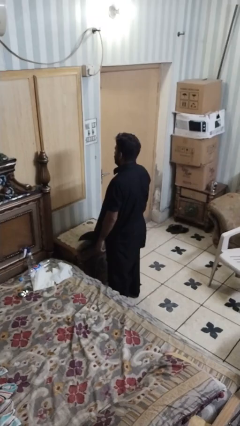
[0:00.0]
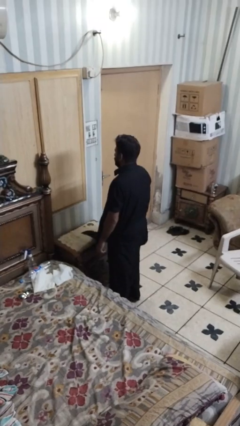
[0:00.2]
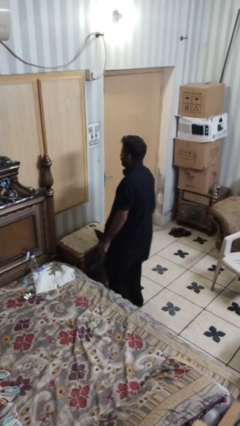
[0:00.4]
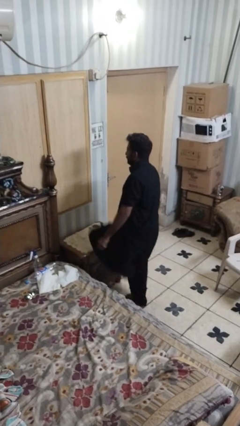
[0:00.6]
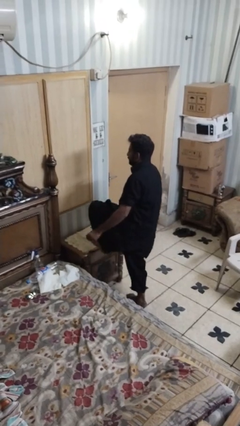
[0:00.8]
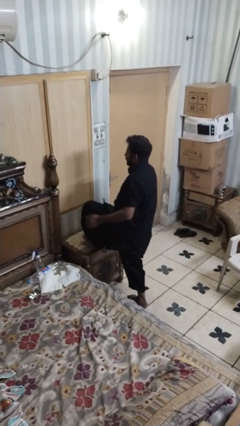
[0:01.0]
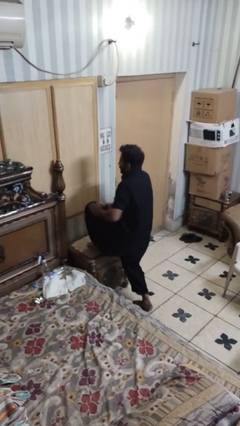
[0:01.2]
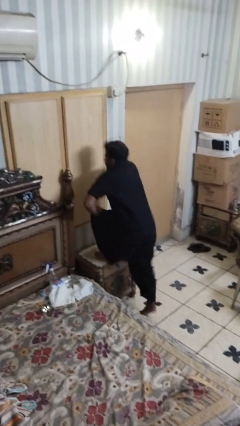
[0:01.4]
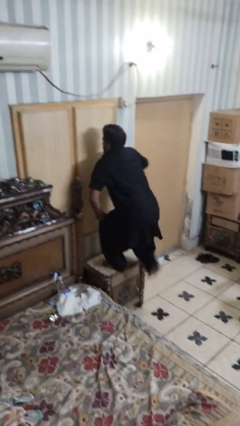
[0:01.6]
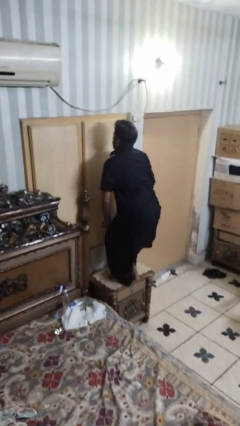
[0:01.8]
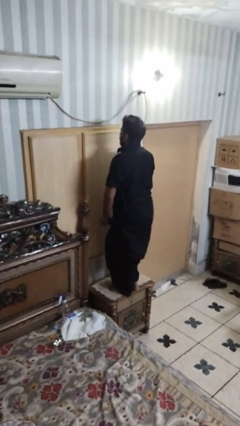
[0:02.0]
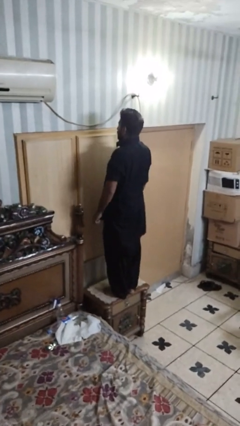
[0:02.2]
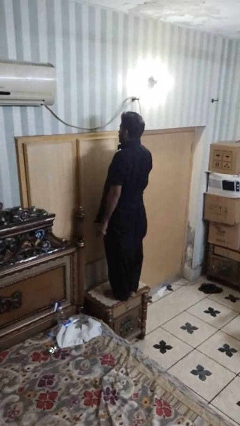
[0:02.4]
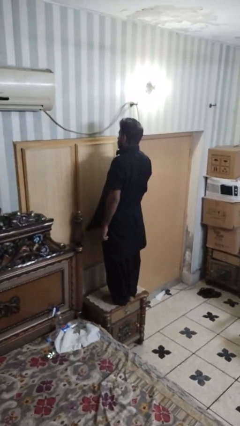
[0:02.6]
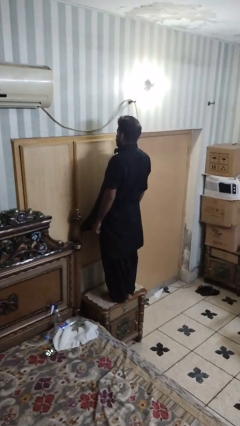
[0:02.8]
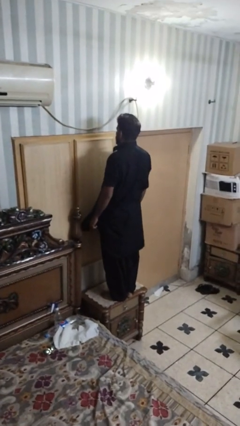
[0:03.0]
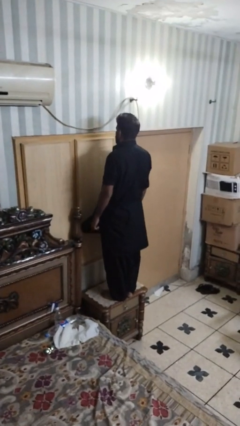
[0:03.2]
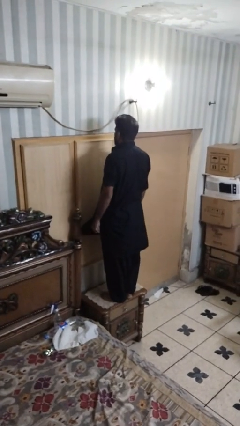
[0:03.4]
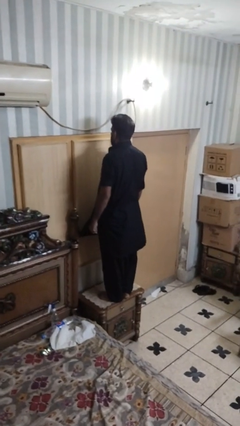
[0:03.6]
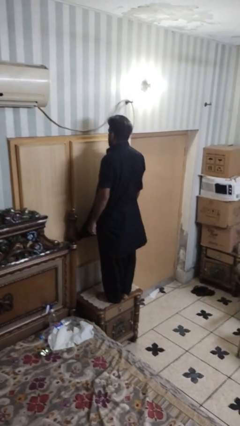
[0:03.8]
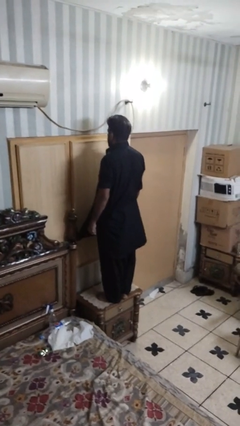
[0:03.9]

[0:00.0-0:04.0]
person climbs on table

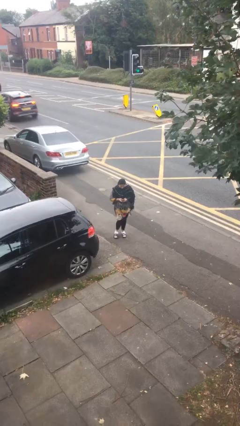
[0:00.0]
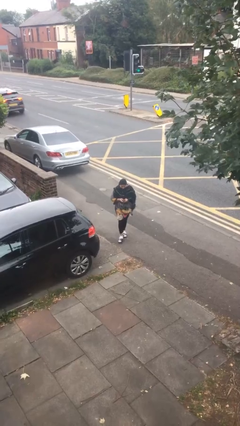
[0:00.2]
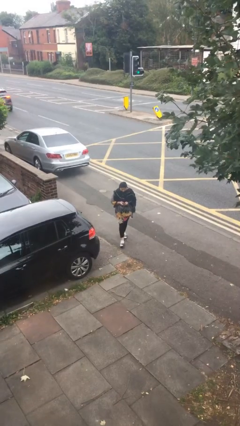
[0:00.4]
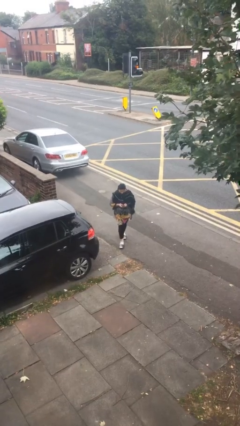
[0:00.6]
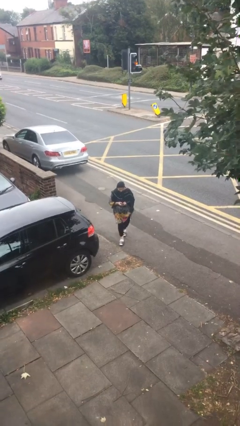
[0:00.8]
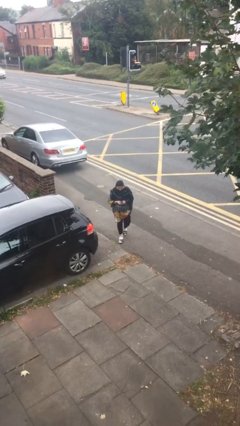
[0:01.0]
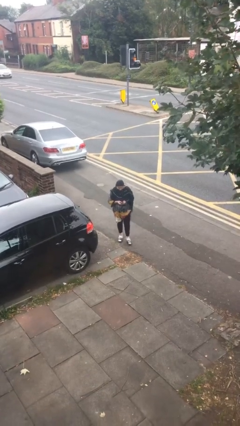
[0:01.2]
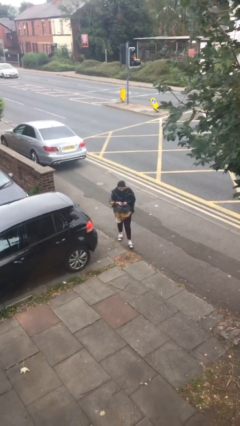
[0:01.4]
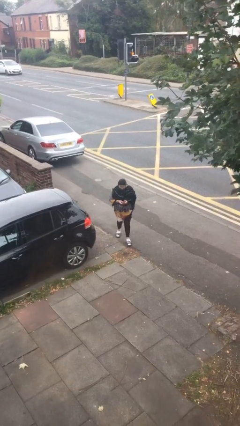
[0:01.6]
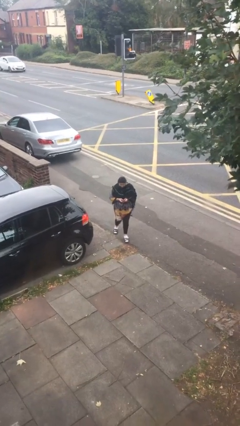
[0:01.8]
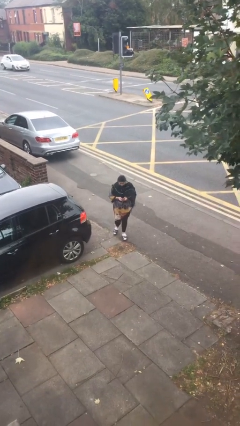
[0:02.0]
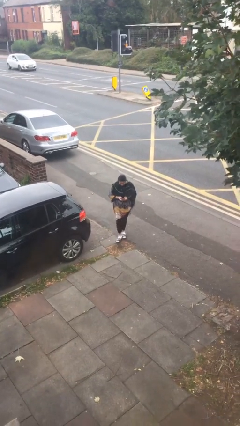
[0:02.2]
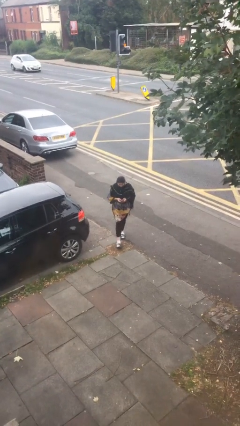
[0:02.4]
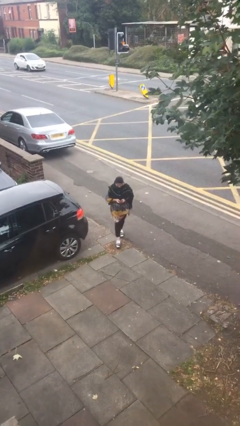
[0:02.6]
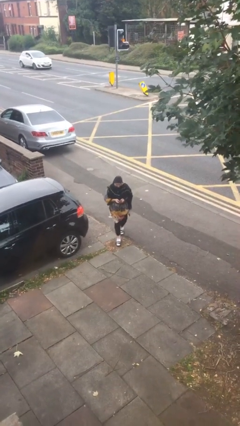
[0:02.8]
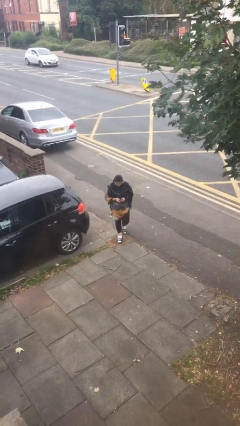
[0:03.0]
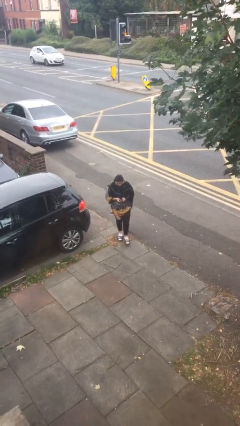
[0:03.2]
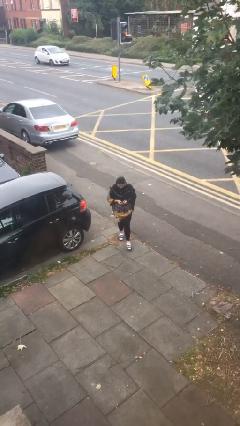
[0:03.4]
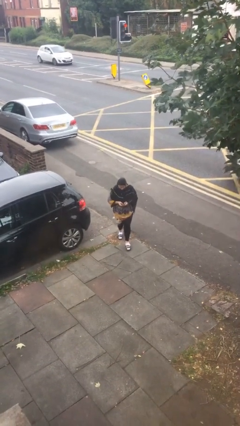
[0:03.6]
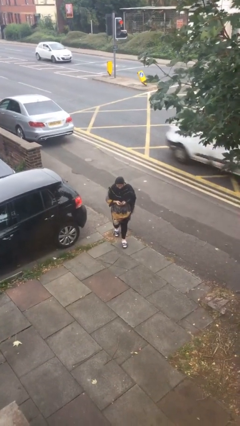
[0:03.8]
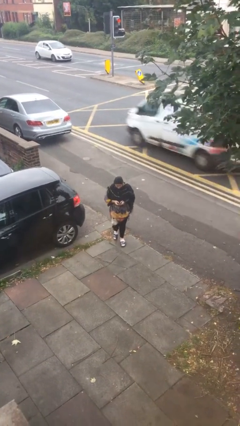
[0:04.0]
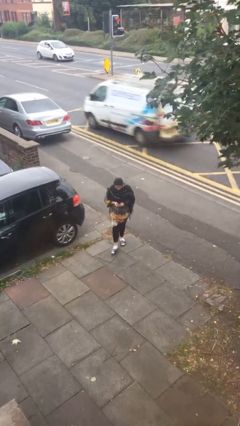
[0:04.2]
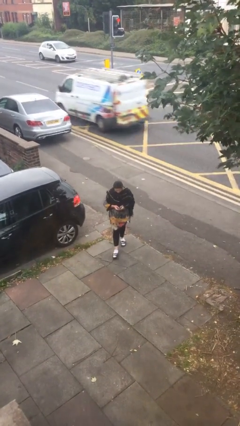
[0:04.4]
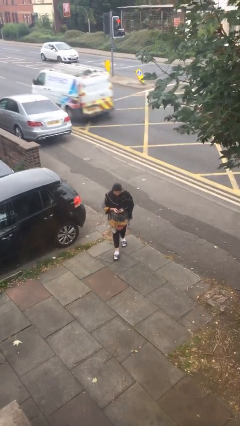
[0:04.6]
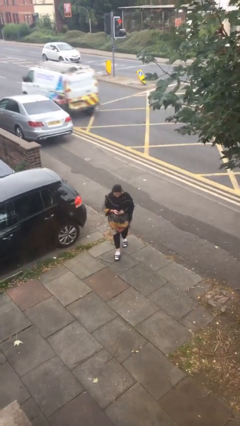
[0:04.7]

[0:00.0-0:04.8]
person texts on phone

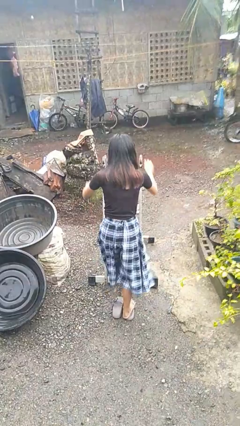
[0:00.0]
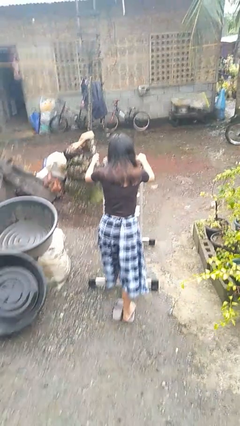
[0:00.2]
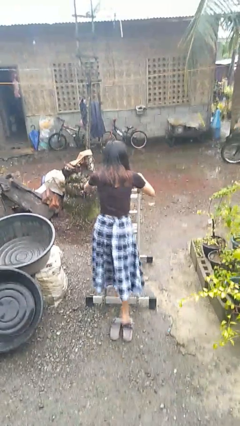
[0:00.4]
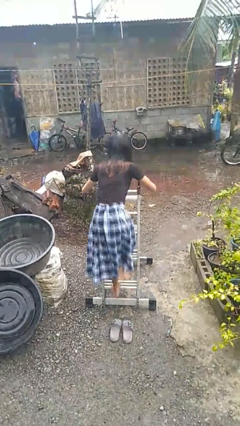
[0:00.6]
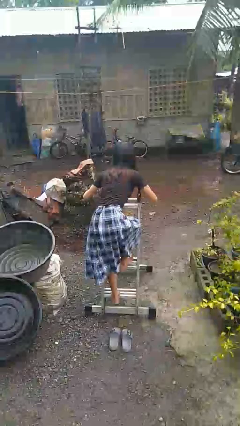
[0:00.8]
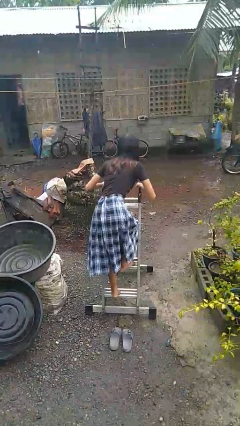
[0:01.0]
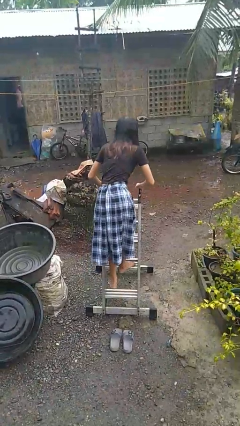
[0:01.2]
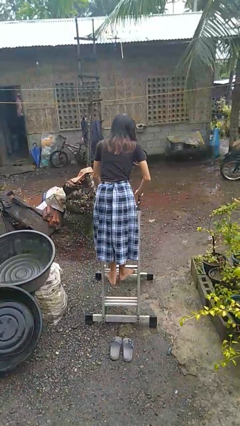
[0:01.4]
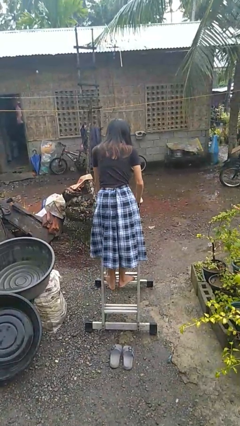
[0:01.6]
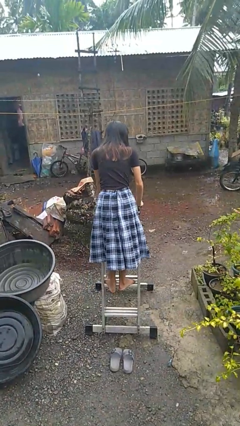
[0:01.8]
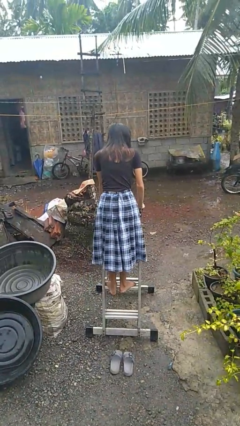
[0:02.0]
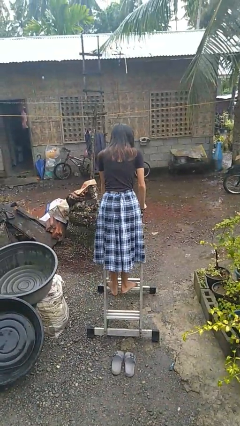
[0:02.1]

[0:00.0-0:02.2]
person climbs up ladder

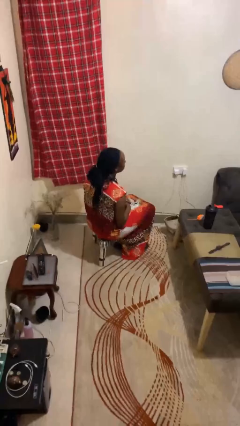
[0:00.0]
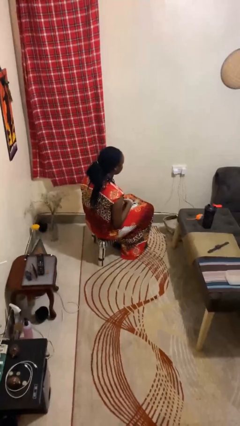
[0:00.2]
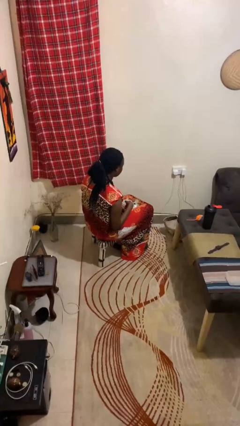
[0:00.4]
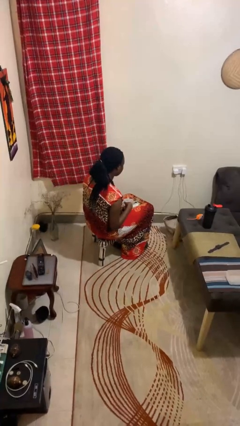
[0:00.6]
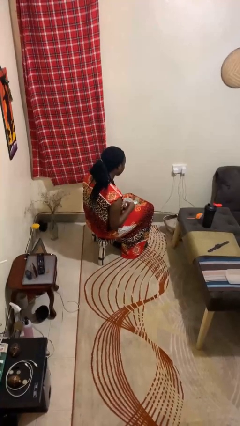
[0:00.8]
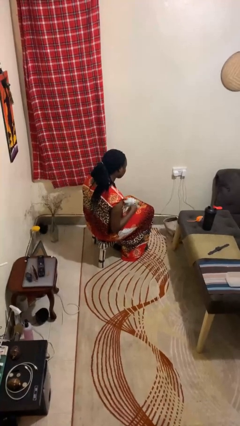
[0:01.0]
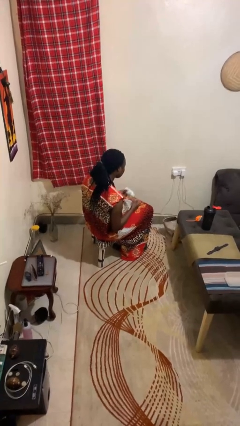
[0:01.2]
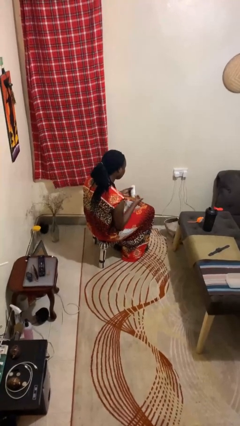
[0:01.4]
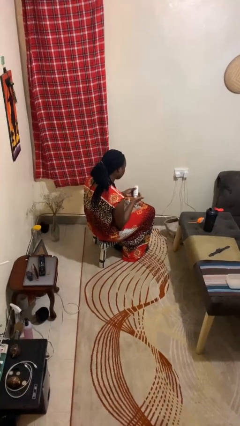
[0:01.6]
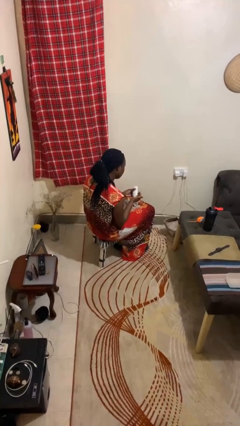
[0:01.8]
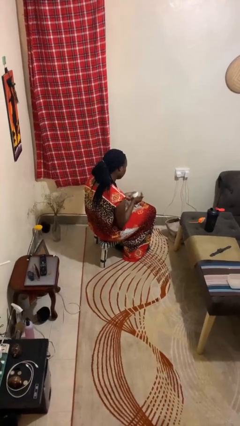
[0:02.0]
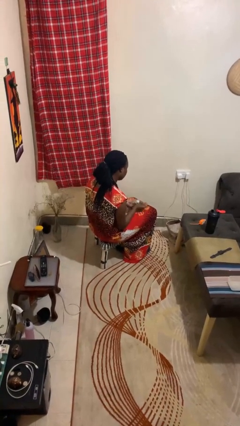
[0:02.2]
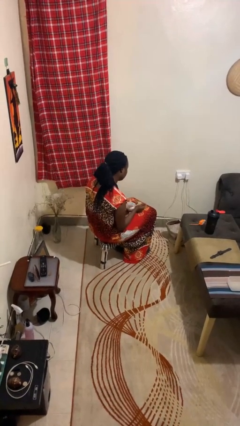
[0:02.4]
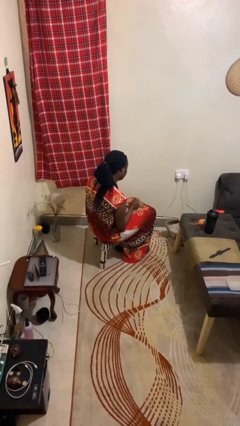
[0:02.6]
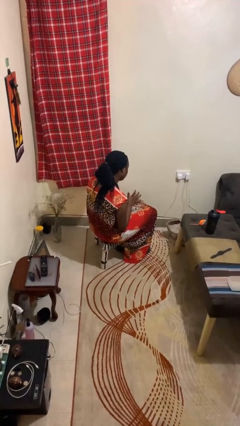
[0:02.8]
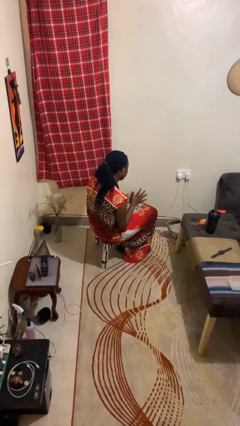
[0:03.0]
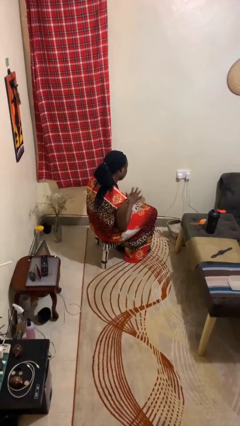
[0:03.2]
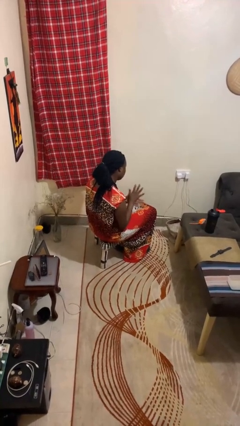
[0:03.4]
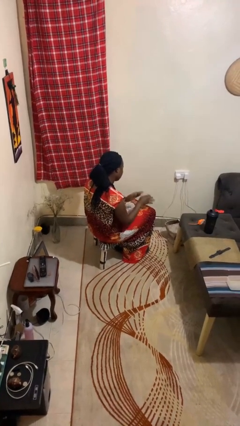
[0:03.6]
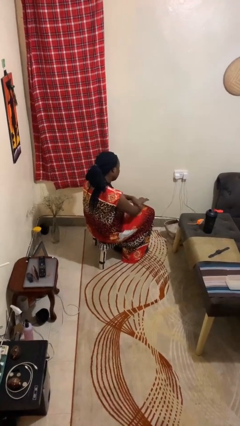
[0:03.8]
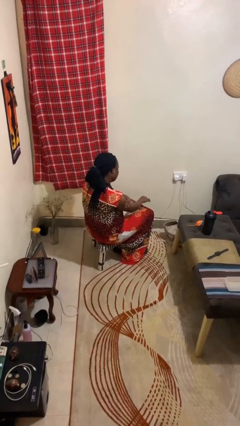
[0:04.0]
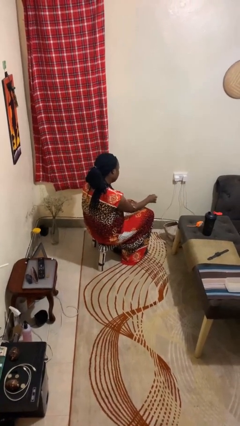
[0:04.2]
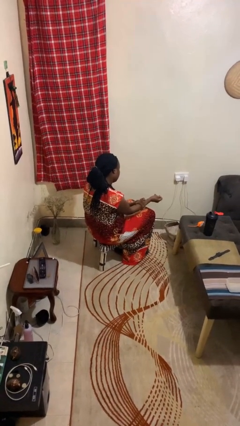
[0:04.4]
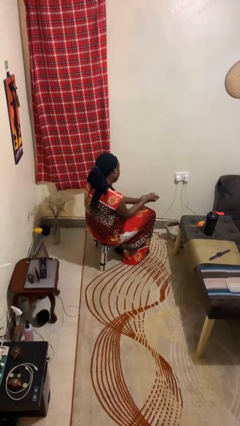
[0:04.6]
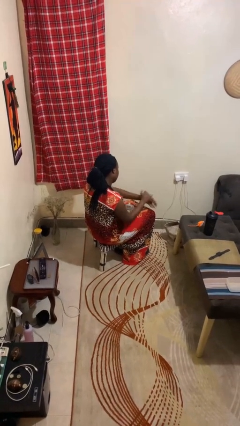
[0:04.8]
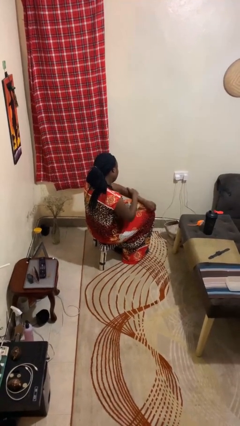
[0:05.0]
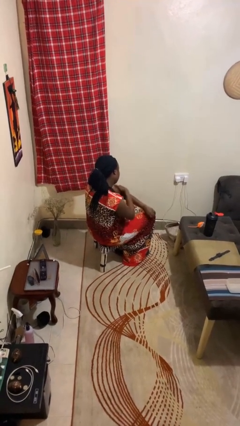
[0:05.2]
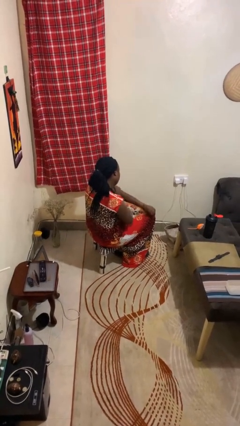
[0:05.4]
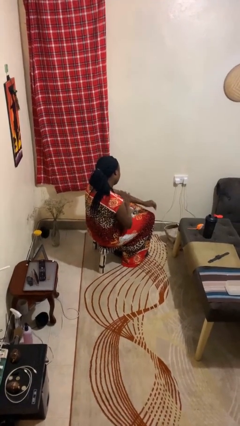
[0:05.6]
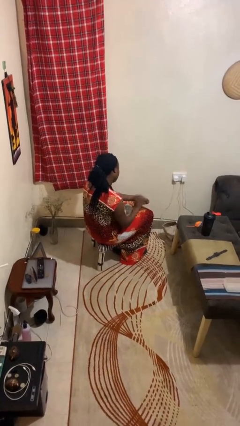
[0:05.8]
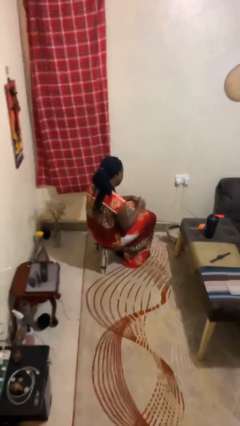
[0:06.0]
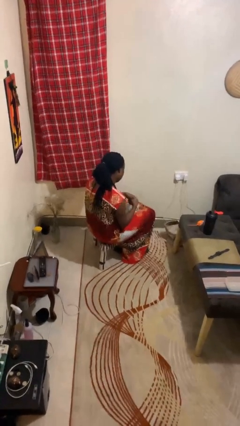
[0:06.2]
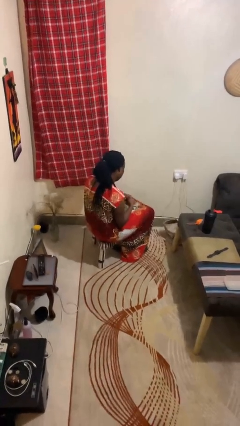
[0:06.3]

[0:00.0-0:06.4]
person applies sunscreen

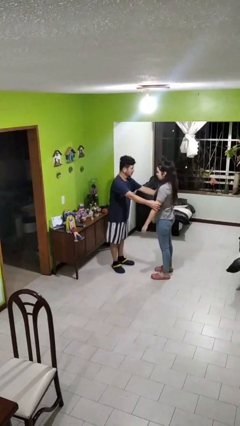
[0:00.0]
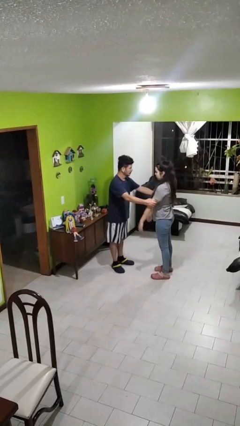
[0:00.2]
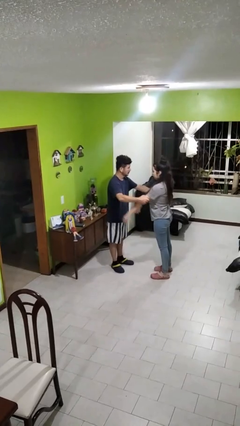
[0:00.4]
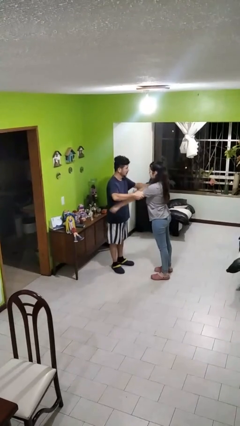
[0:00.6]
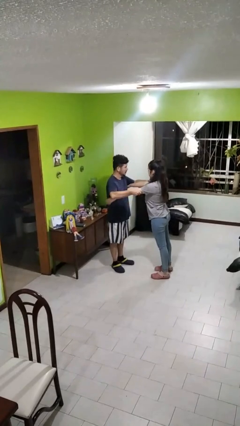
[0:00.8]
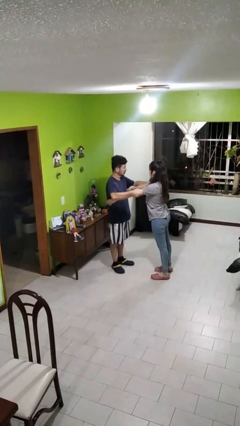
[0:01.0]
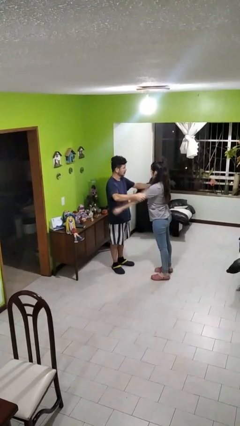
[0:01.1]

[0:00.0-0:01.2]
person grabs person by bicep
